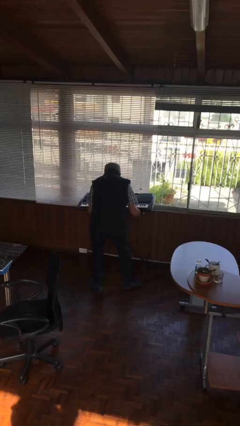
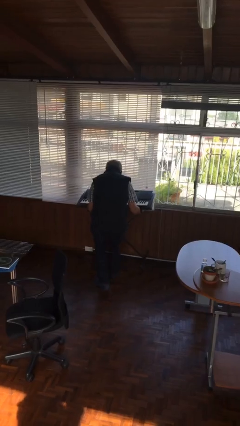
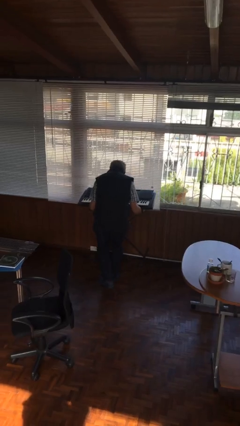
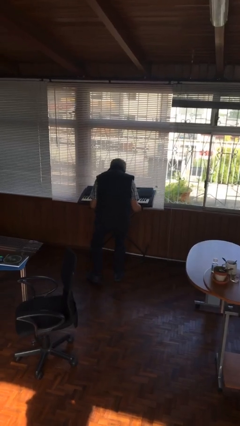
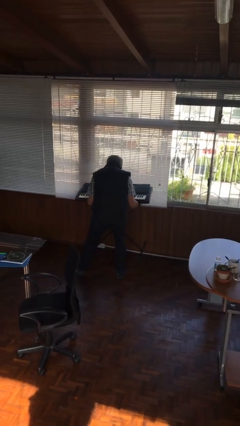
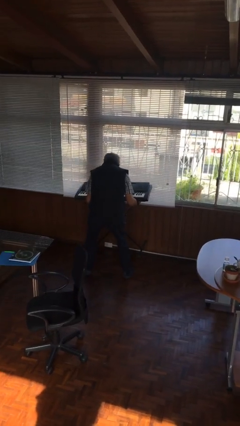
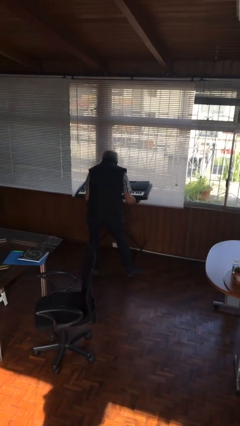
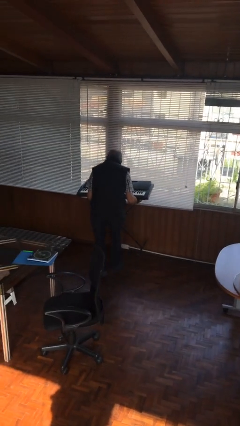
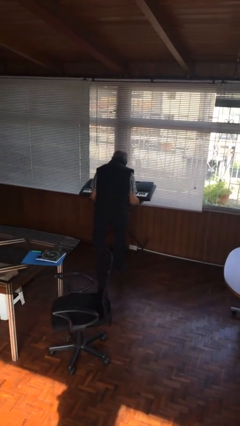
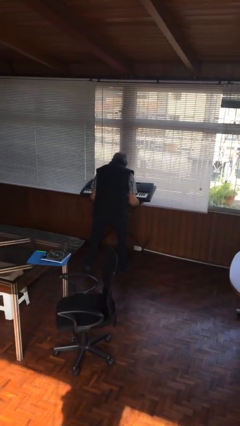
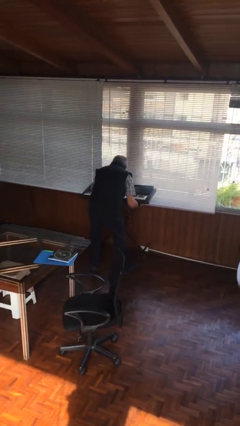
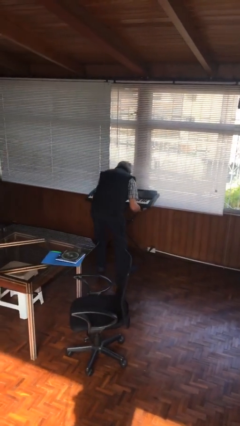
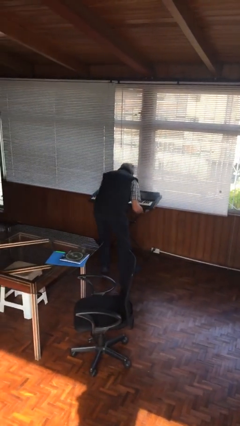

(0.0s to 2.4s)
person carries heavy object

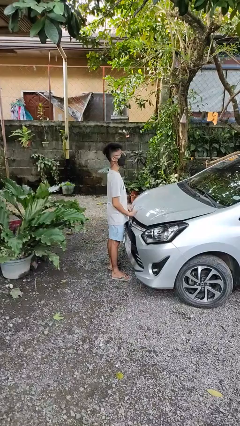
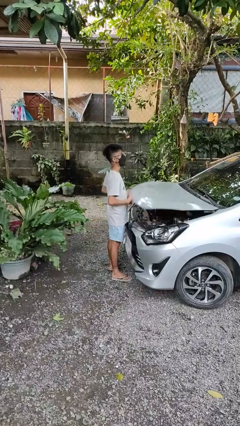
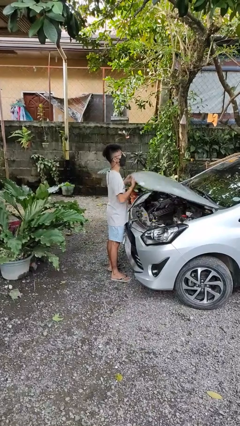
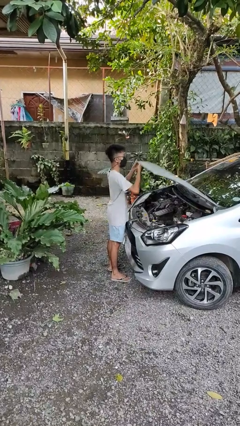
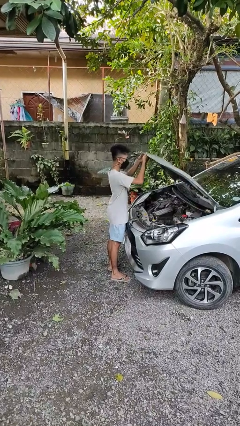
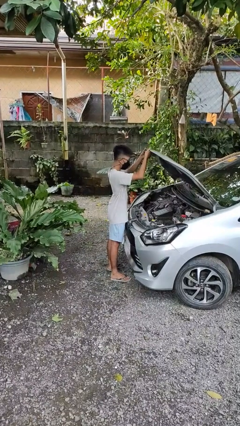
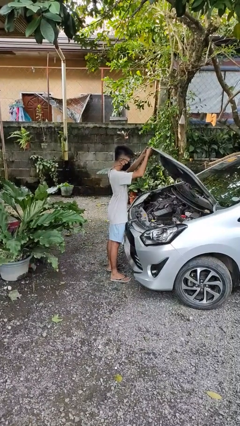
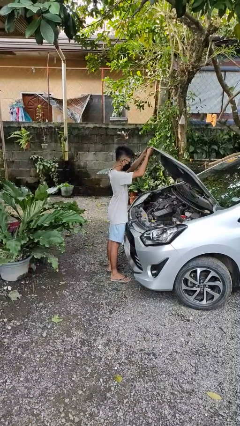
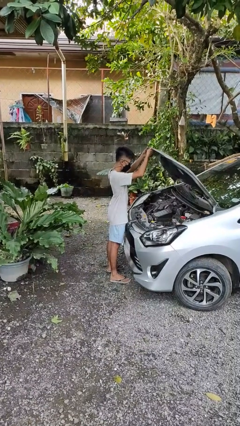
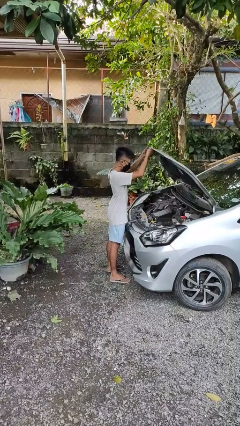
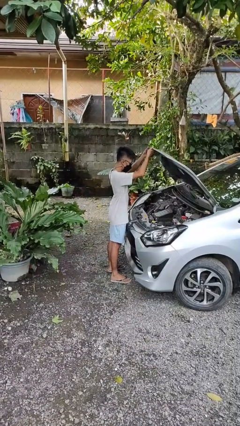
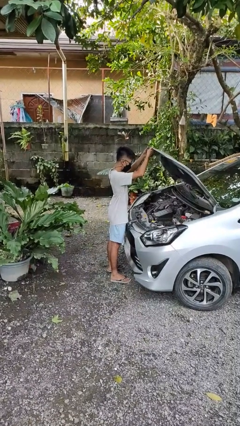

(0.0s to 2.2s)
person opens car hood

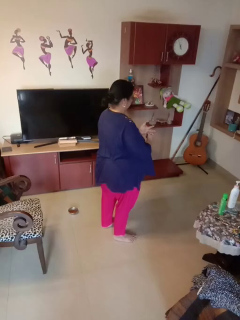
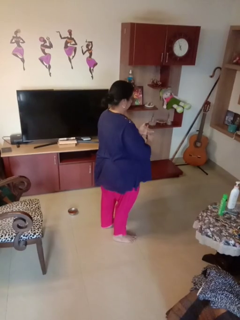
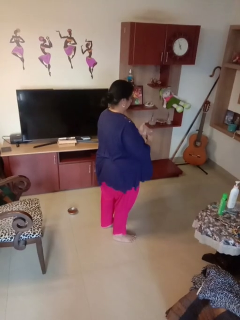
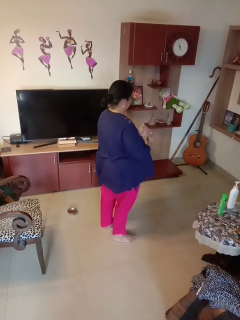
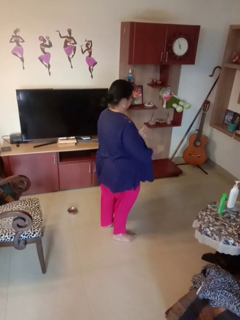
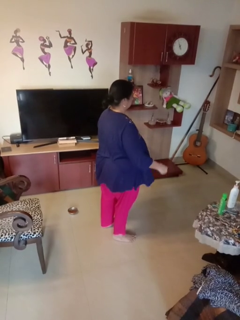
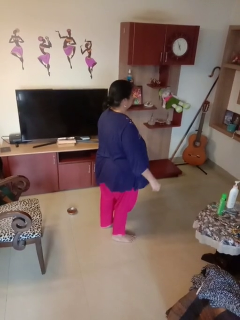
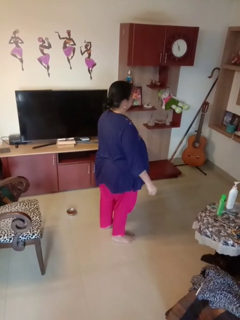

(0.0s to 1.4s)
person takes off ring

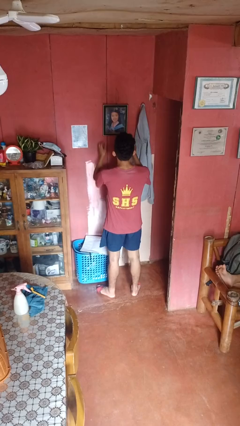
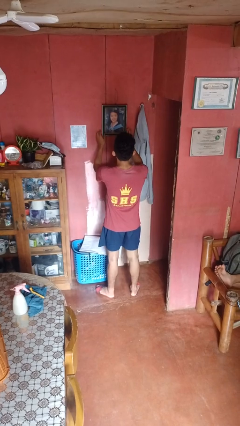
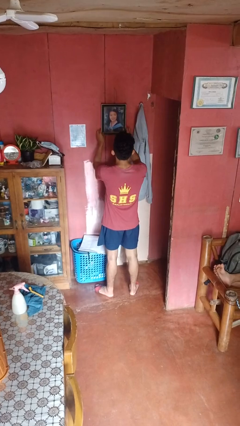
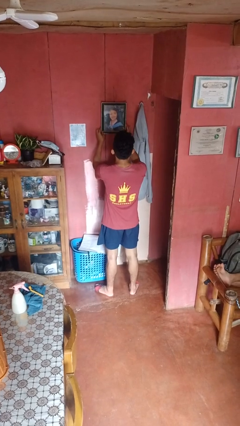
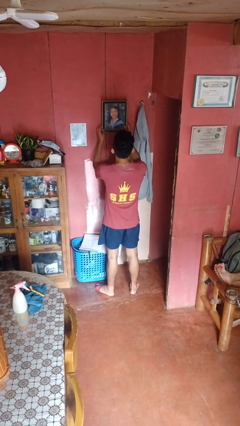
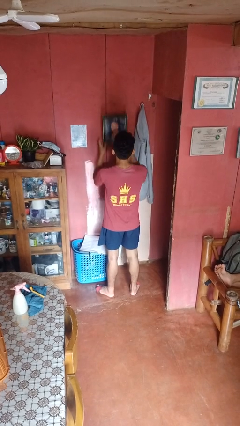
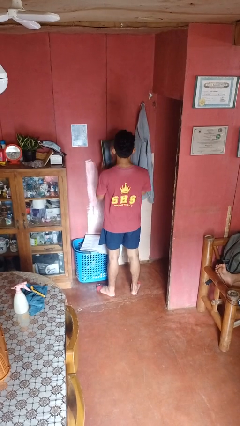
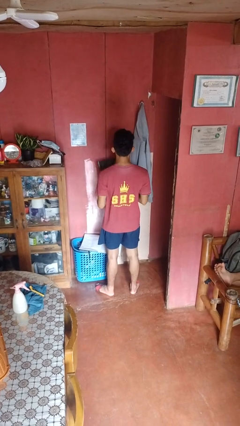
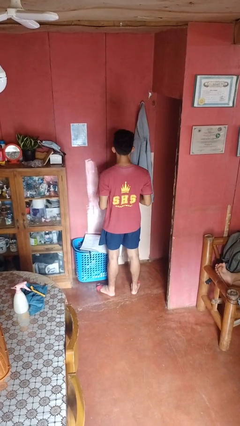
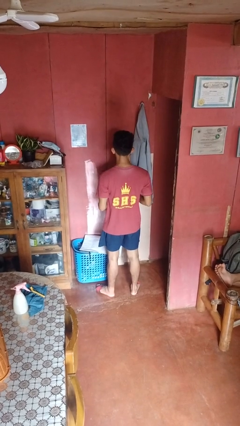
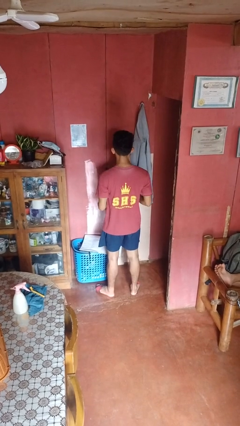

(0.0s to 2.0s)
person takes down picture frame

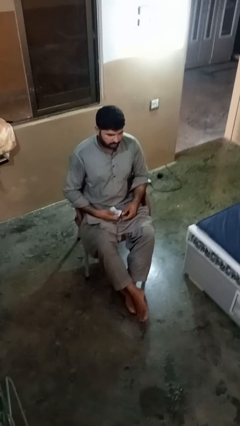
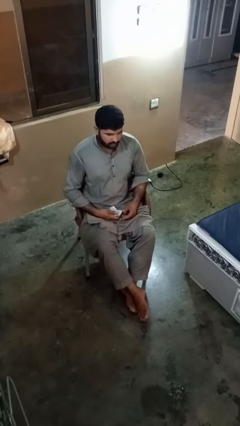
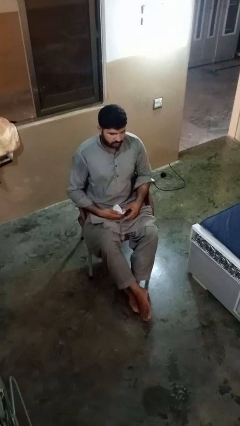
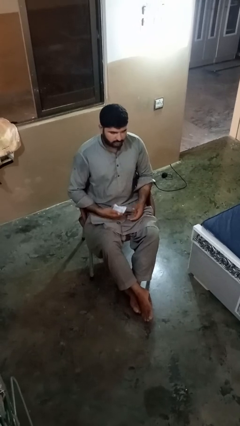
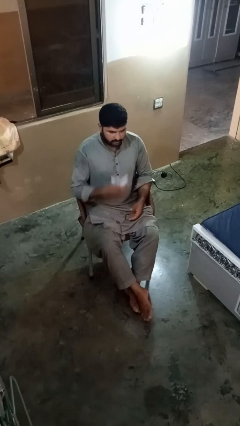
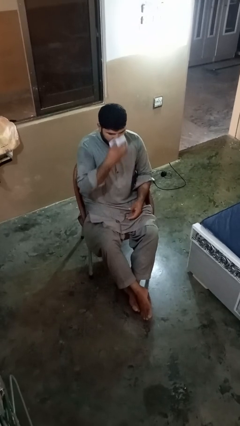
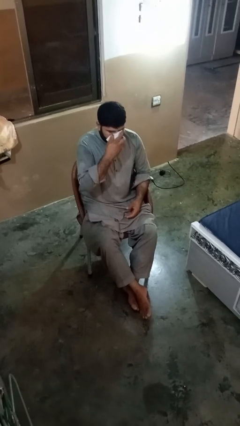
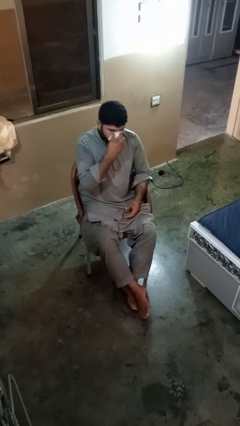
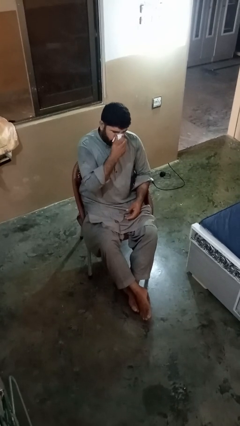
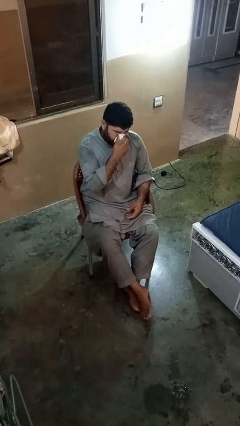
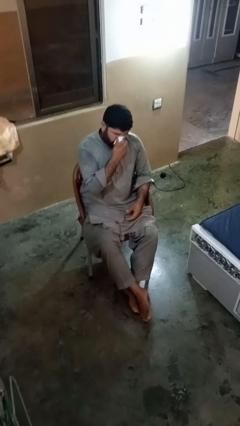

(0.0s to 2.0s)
person blows nose

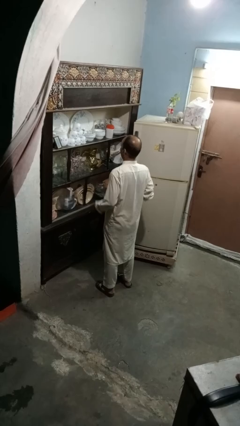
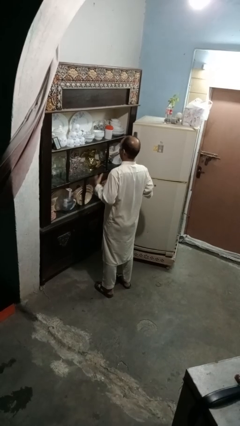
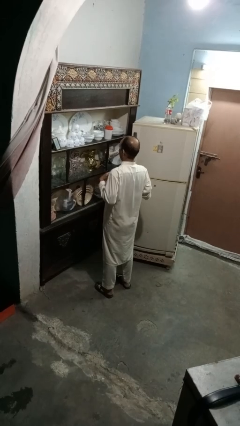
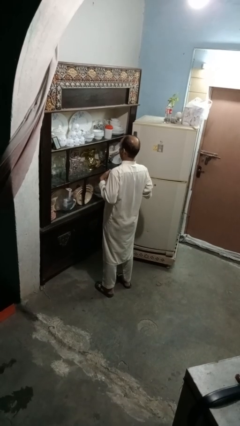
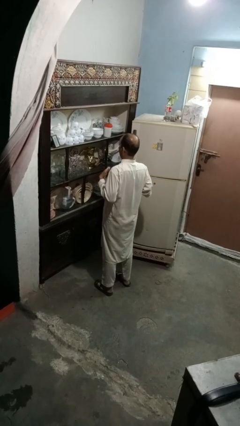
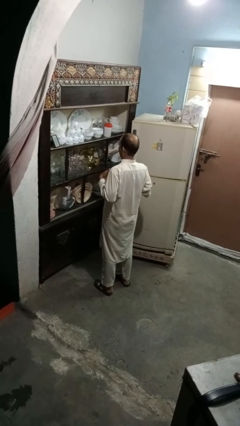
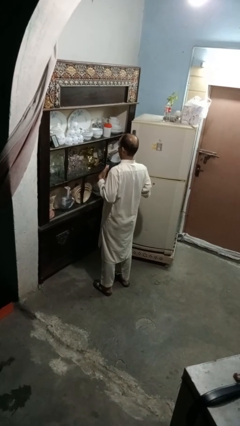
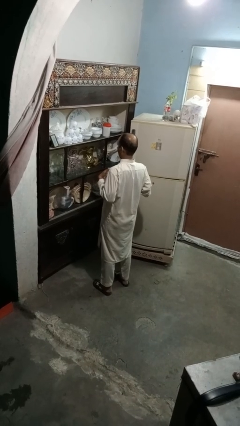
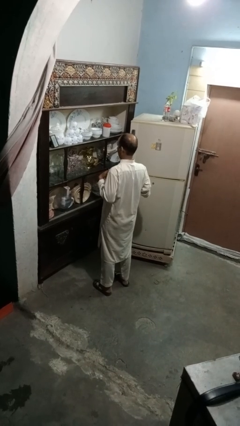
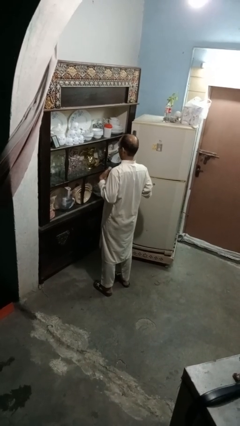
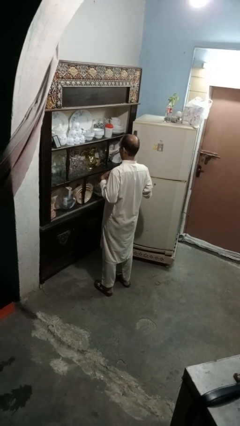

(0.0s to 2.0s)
person drums on chest

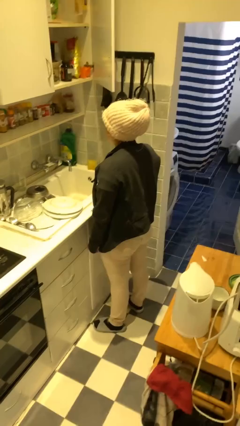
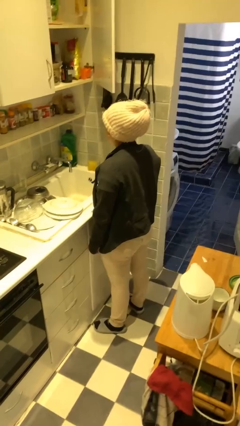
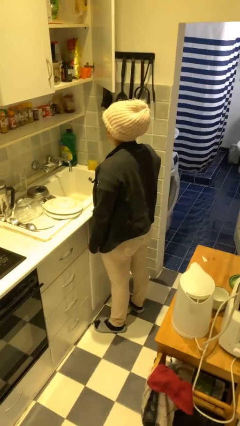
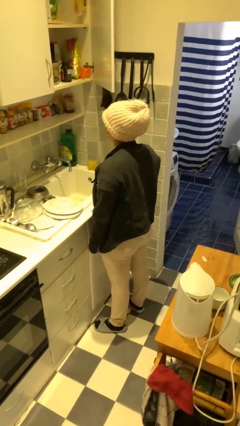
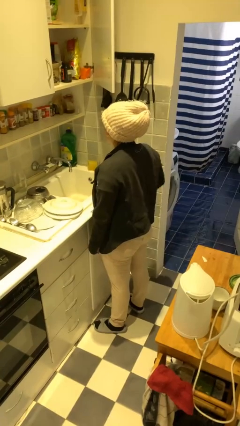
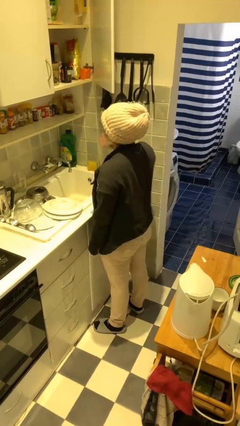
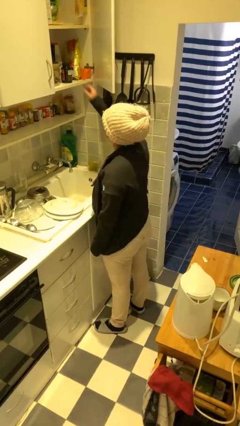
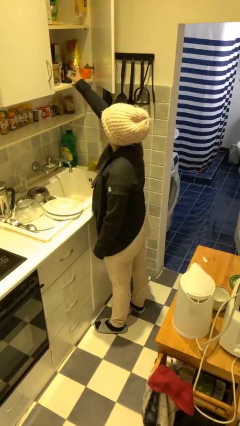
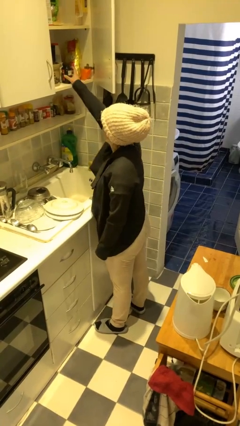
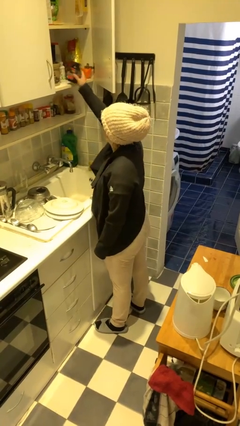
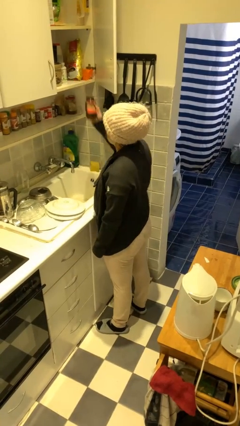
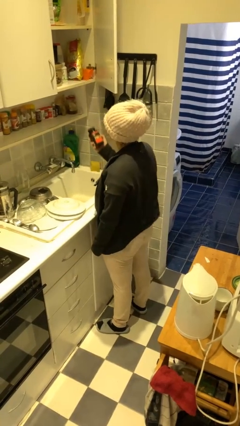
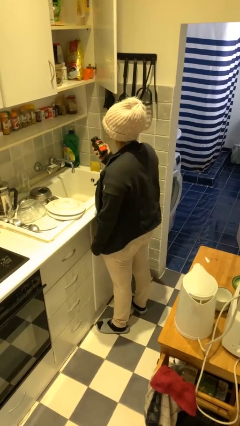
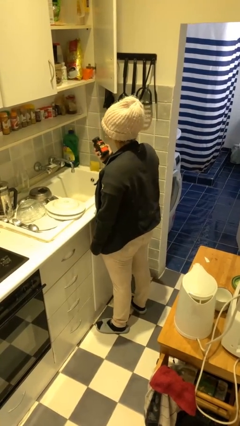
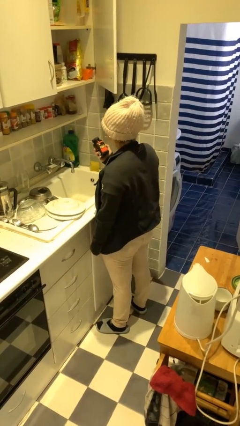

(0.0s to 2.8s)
person picks up object from cabinet

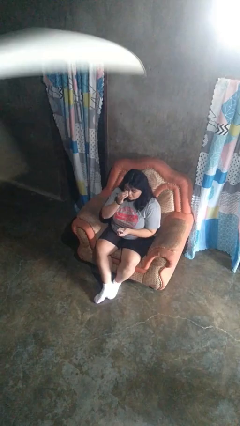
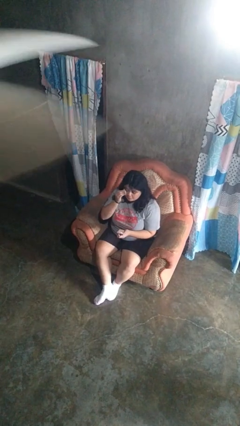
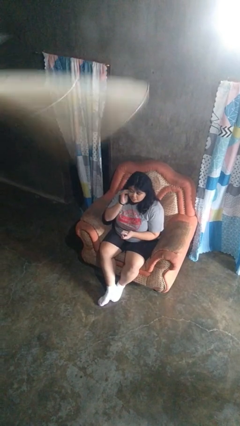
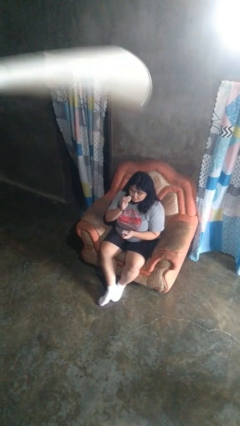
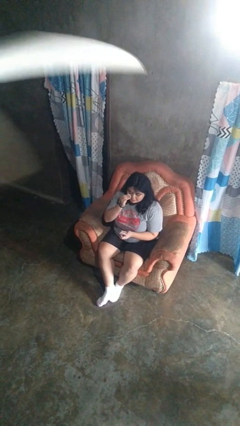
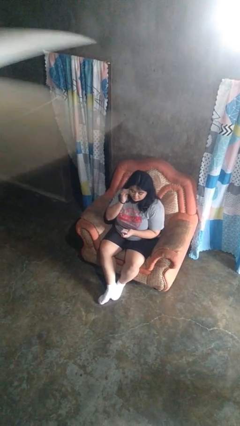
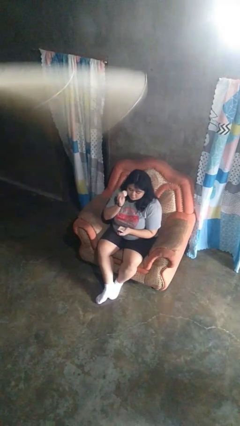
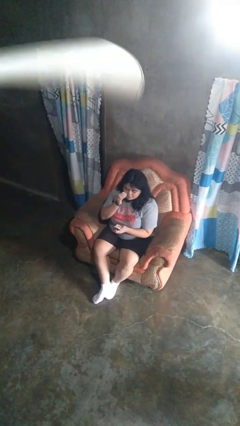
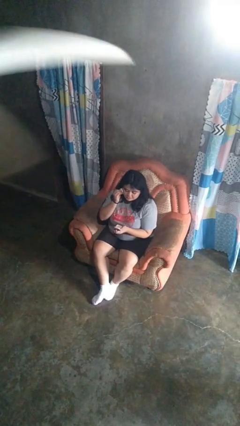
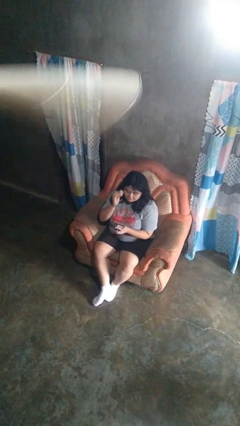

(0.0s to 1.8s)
person applies foundation makeup

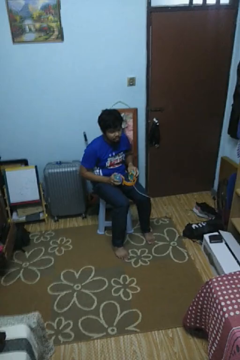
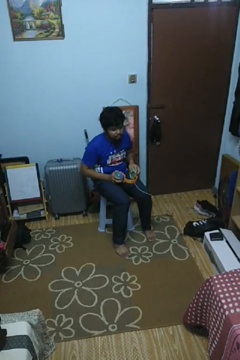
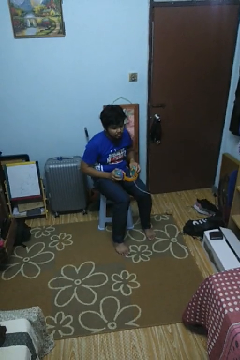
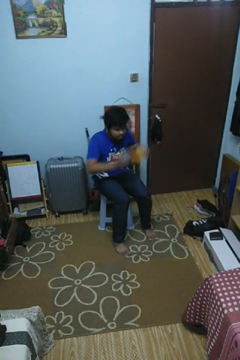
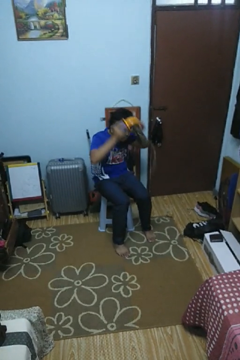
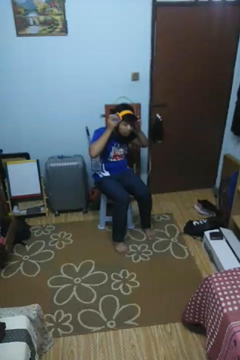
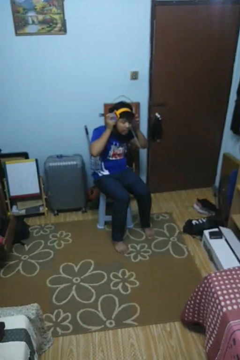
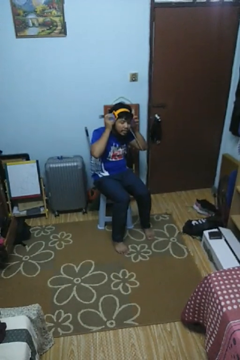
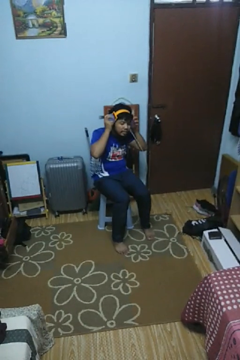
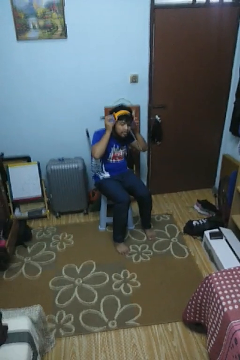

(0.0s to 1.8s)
person puts on headphones
